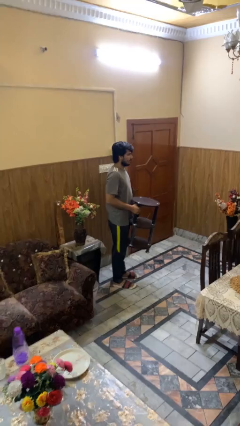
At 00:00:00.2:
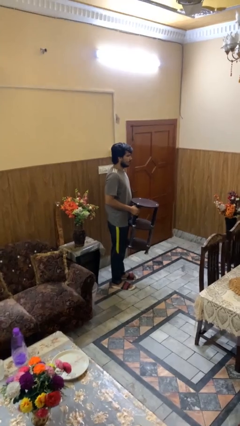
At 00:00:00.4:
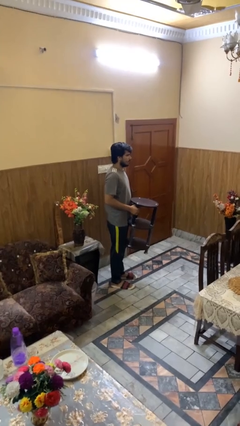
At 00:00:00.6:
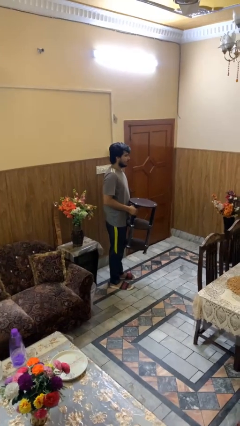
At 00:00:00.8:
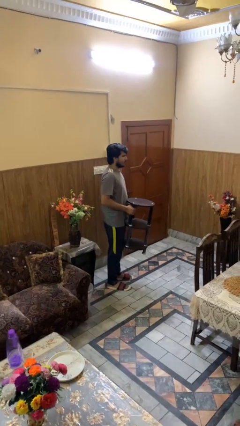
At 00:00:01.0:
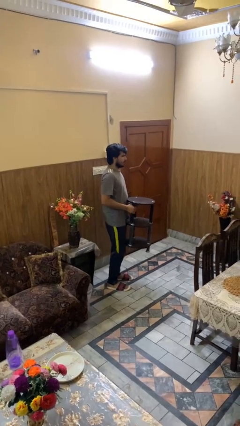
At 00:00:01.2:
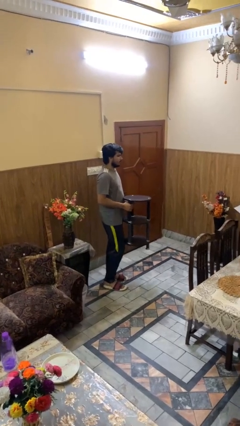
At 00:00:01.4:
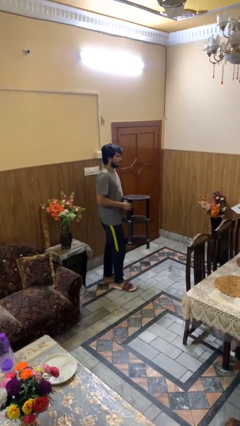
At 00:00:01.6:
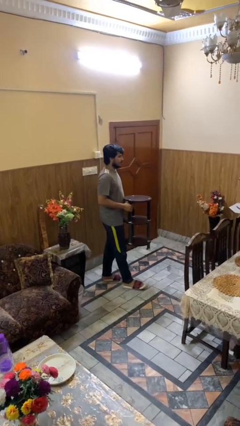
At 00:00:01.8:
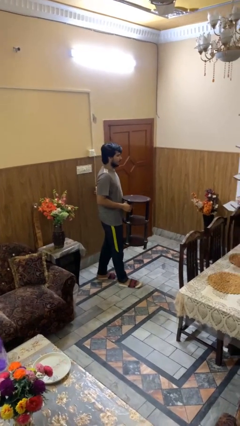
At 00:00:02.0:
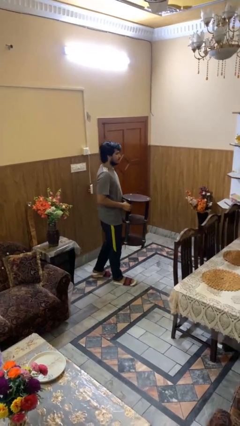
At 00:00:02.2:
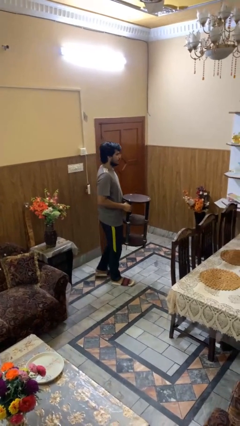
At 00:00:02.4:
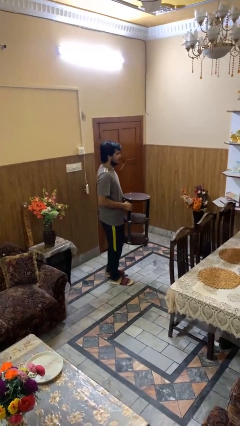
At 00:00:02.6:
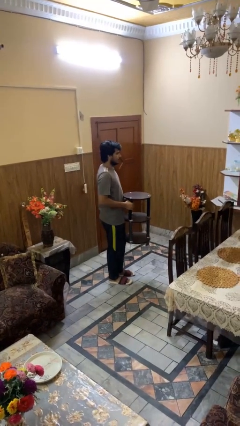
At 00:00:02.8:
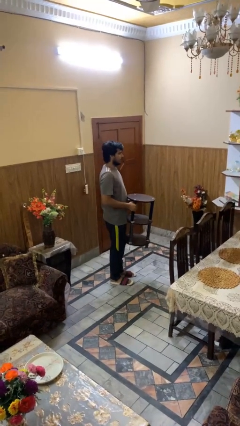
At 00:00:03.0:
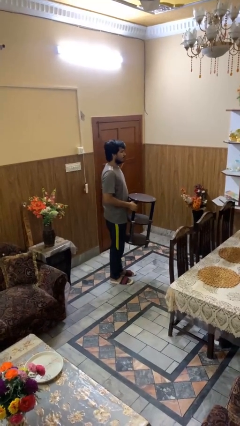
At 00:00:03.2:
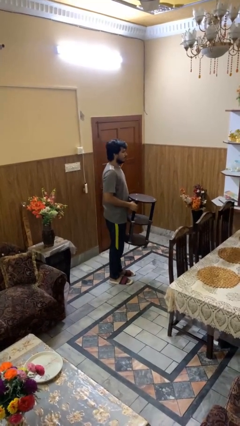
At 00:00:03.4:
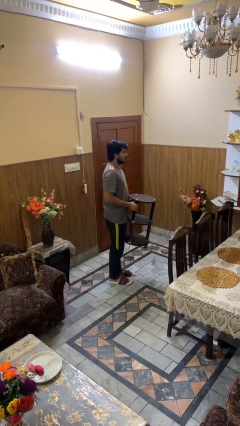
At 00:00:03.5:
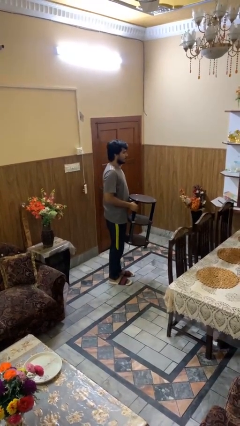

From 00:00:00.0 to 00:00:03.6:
person carries furniture

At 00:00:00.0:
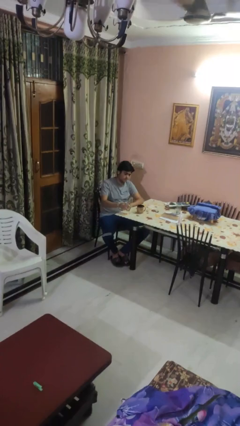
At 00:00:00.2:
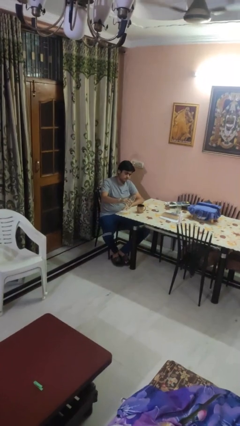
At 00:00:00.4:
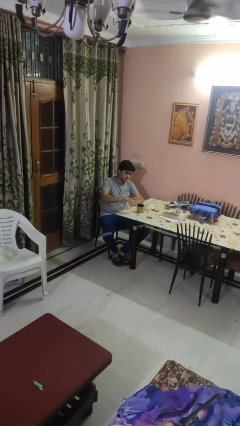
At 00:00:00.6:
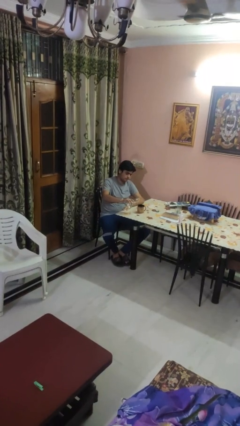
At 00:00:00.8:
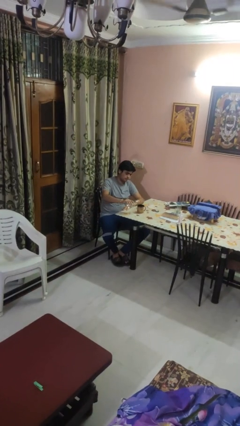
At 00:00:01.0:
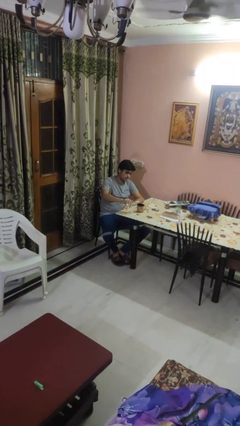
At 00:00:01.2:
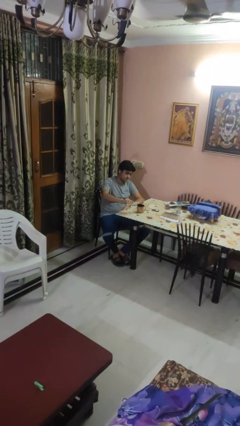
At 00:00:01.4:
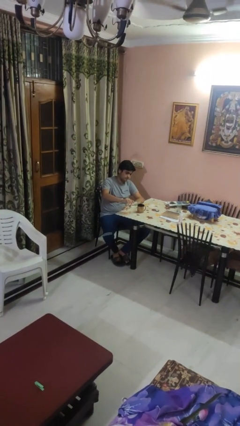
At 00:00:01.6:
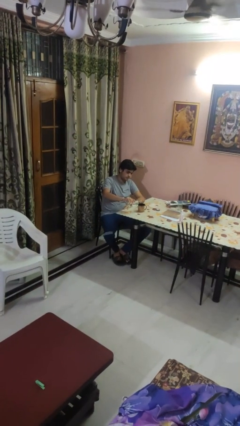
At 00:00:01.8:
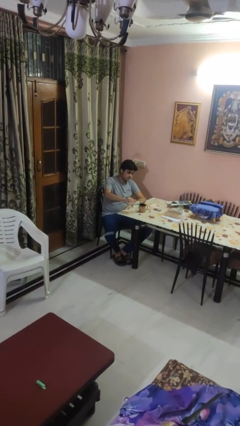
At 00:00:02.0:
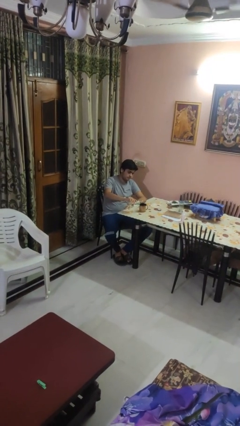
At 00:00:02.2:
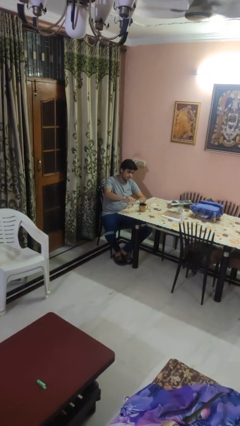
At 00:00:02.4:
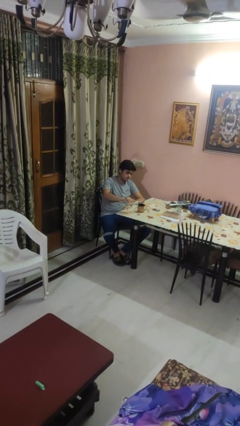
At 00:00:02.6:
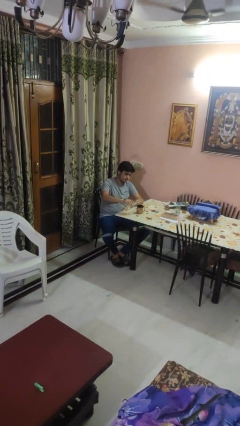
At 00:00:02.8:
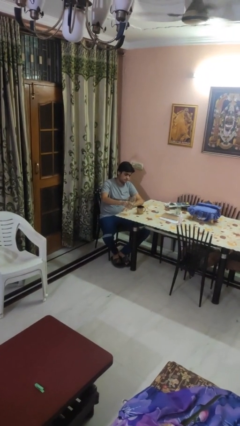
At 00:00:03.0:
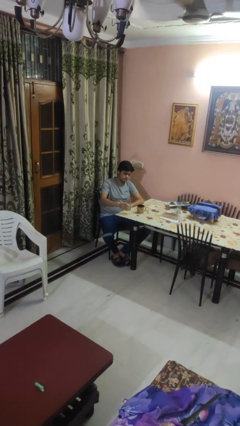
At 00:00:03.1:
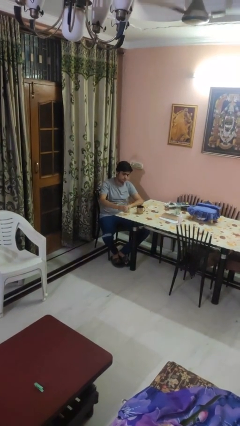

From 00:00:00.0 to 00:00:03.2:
person pours liquid into cup

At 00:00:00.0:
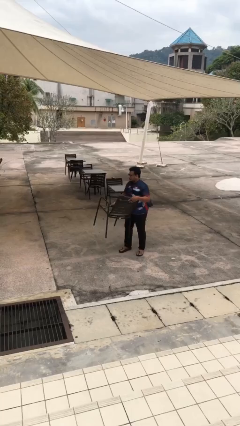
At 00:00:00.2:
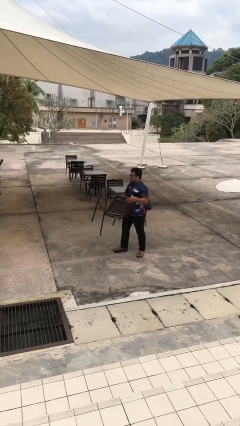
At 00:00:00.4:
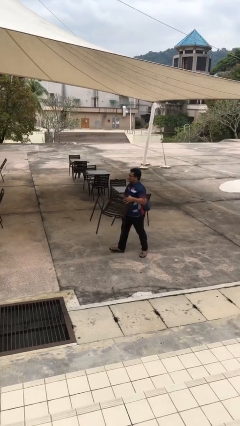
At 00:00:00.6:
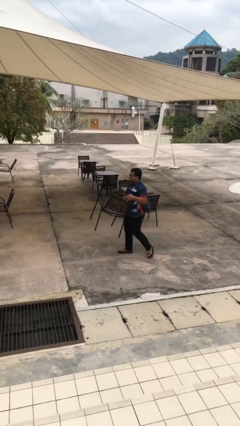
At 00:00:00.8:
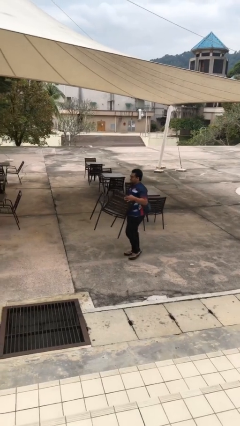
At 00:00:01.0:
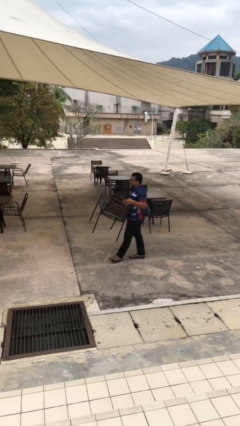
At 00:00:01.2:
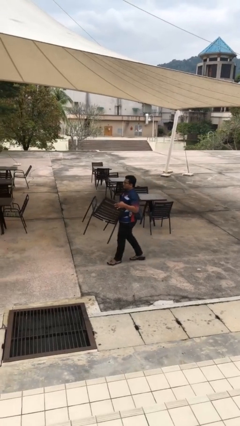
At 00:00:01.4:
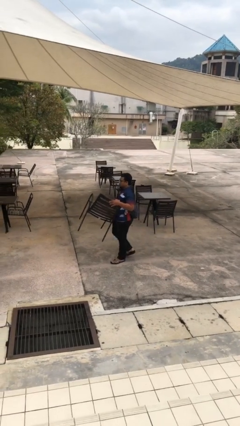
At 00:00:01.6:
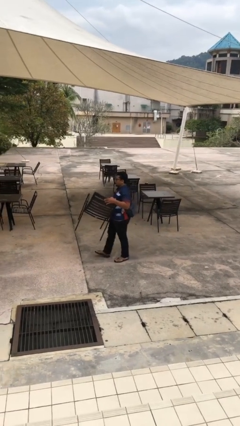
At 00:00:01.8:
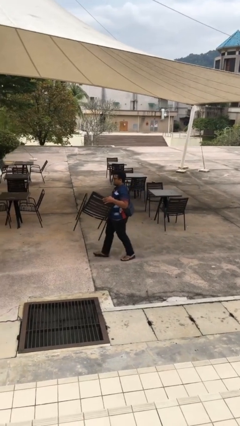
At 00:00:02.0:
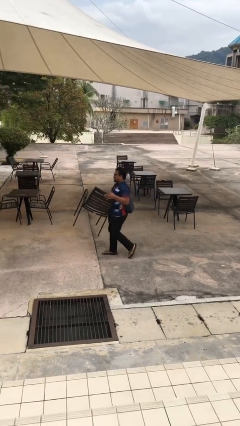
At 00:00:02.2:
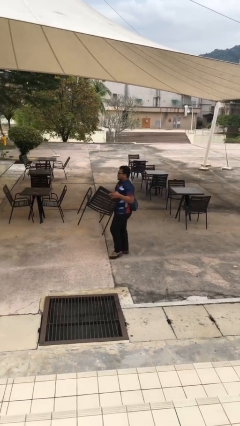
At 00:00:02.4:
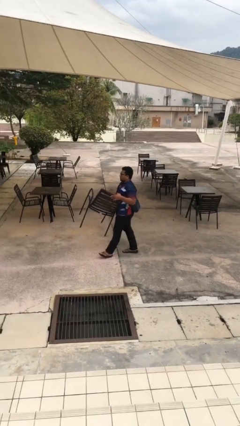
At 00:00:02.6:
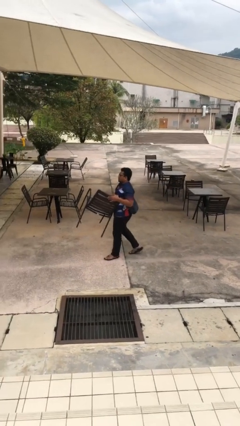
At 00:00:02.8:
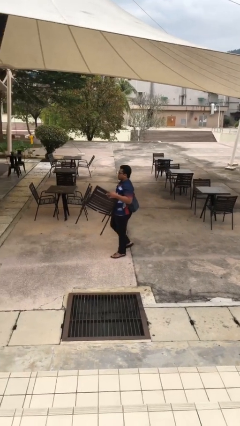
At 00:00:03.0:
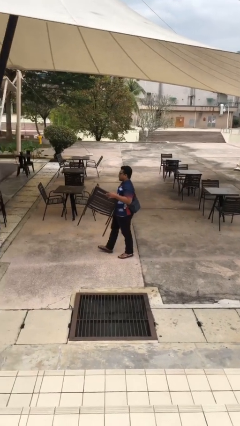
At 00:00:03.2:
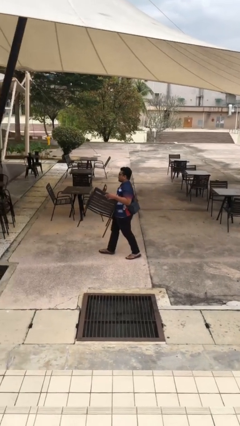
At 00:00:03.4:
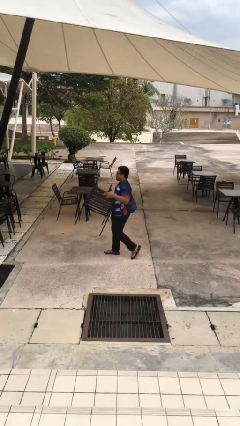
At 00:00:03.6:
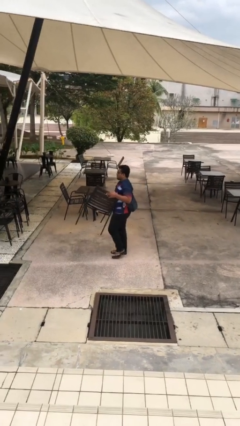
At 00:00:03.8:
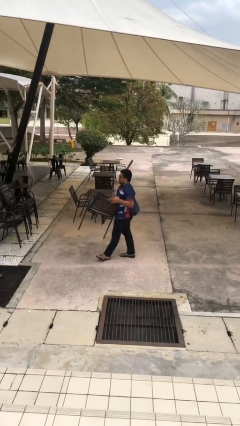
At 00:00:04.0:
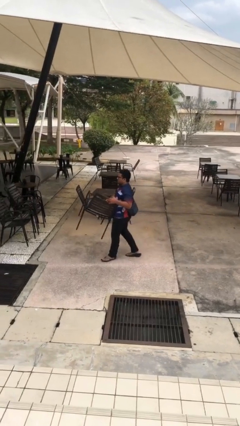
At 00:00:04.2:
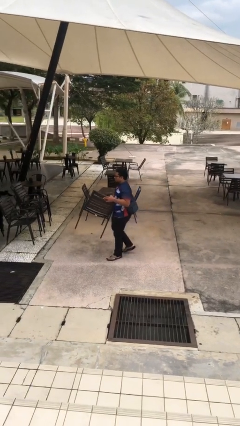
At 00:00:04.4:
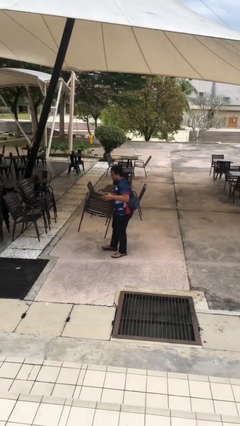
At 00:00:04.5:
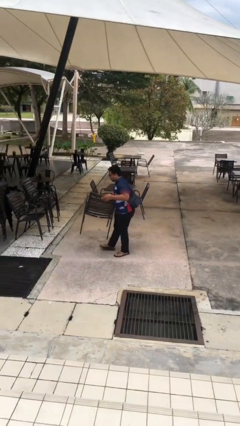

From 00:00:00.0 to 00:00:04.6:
person carries heavy object

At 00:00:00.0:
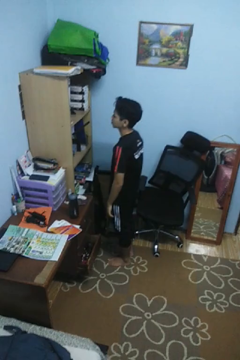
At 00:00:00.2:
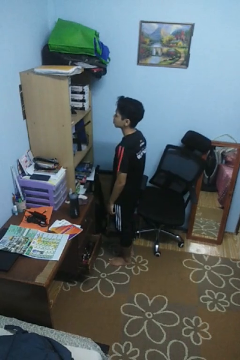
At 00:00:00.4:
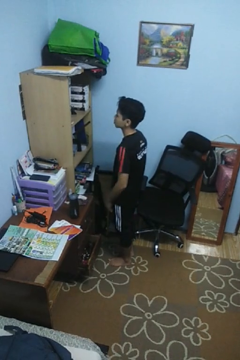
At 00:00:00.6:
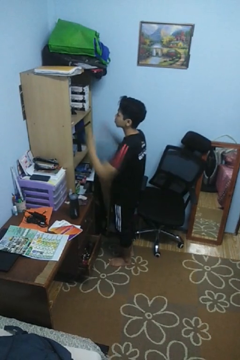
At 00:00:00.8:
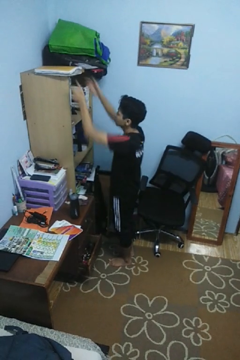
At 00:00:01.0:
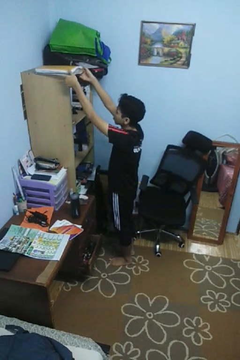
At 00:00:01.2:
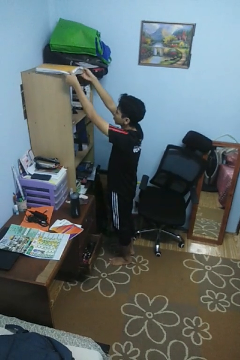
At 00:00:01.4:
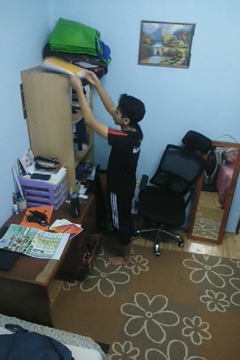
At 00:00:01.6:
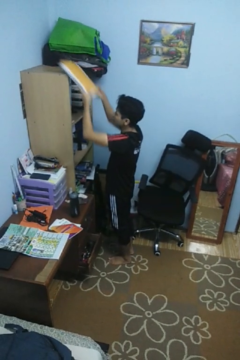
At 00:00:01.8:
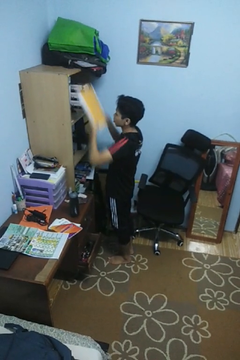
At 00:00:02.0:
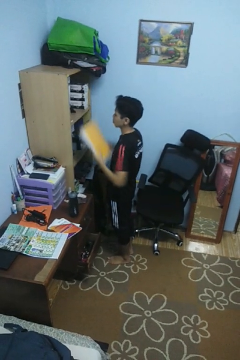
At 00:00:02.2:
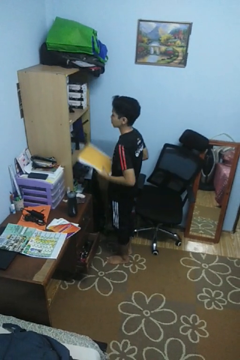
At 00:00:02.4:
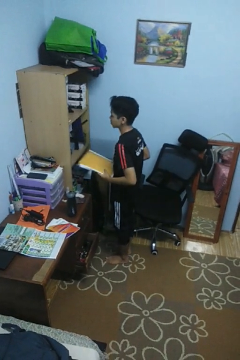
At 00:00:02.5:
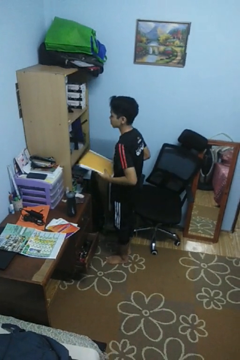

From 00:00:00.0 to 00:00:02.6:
person picks up object from shelf

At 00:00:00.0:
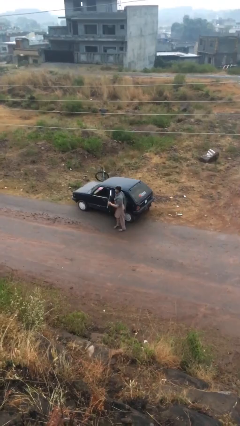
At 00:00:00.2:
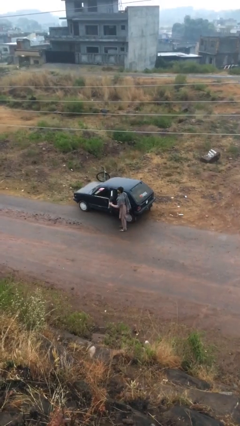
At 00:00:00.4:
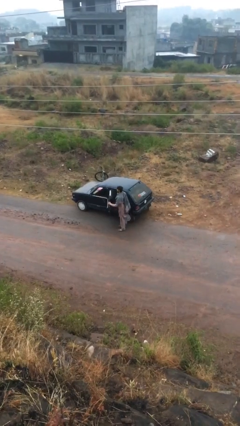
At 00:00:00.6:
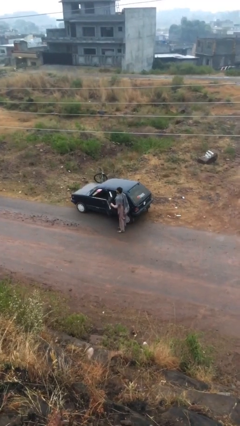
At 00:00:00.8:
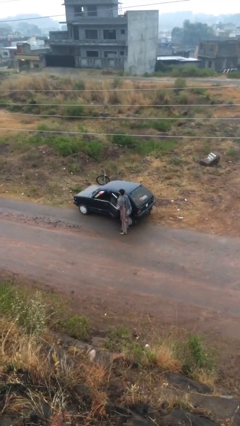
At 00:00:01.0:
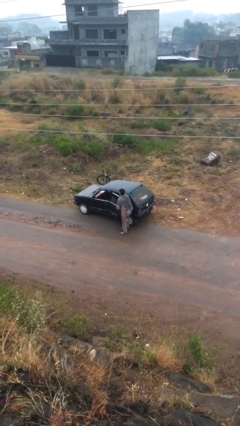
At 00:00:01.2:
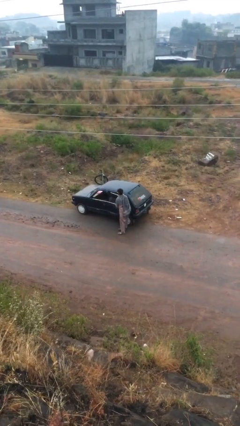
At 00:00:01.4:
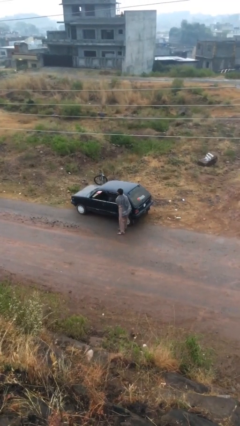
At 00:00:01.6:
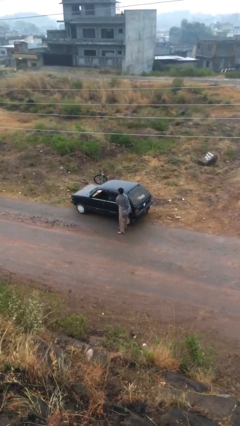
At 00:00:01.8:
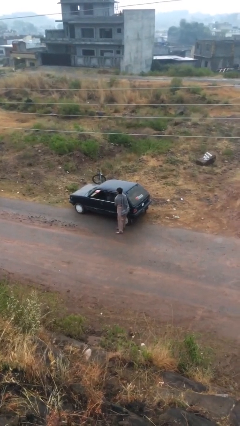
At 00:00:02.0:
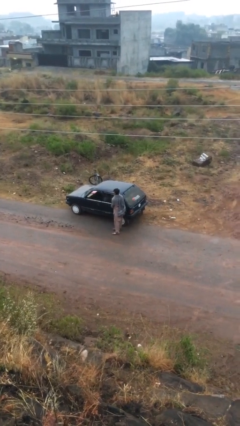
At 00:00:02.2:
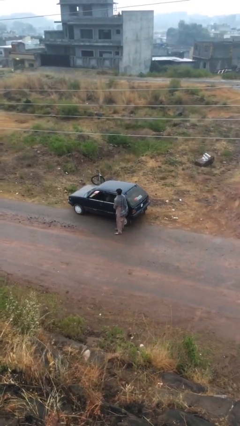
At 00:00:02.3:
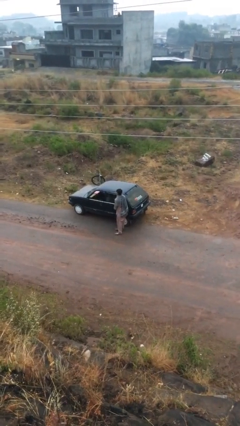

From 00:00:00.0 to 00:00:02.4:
person closes car door

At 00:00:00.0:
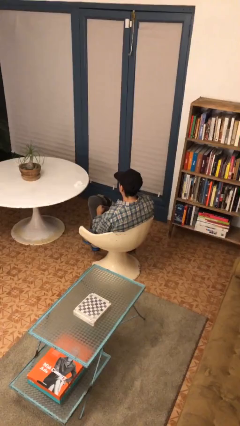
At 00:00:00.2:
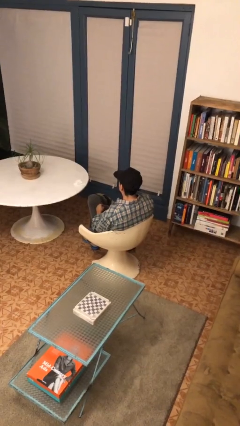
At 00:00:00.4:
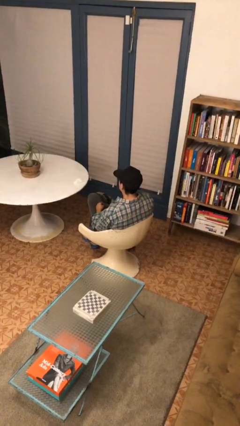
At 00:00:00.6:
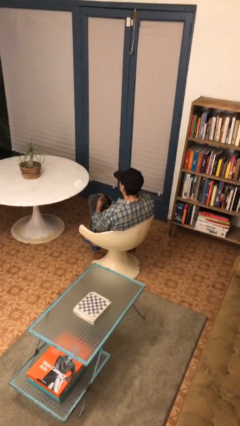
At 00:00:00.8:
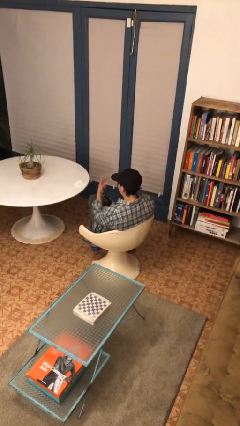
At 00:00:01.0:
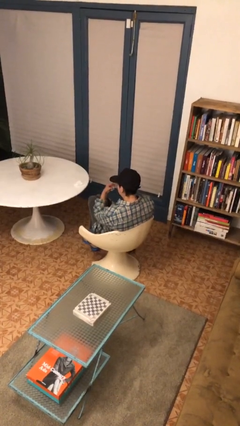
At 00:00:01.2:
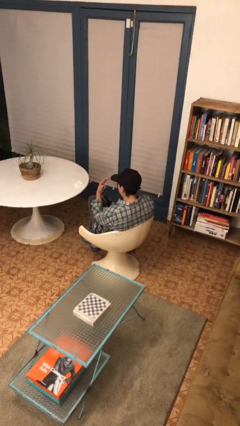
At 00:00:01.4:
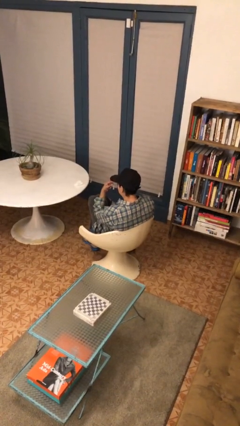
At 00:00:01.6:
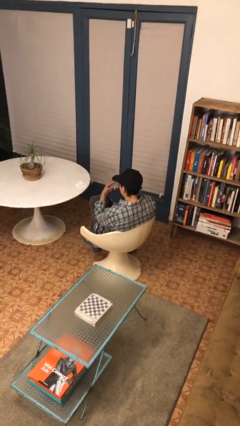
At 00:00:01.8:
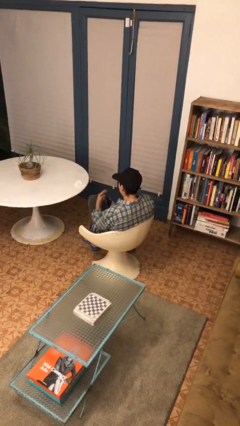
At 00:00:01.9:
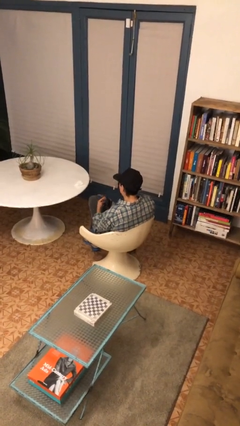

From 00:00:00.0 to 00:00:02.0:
person gestures watch closely
